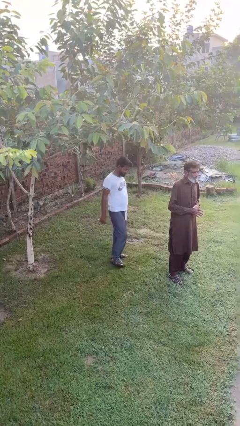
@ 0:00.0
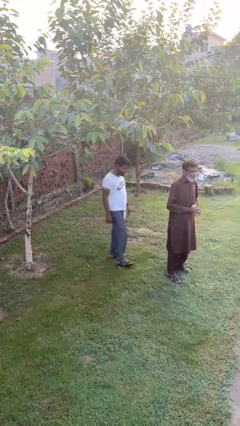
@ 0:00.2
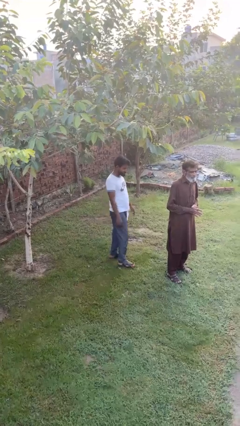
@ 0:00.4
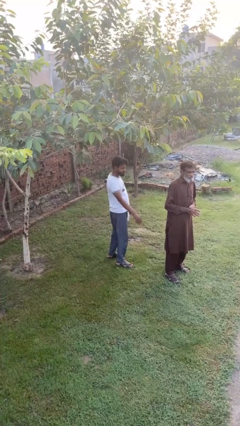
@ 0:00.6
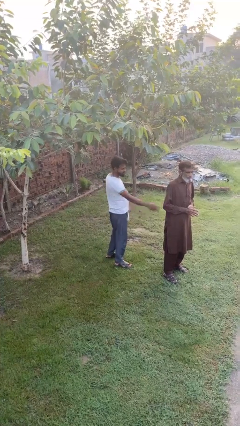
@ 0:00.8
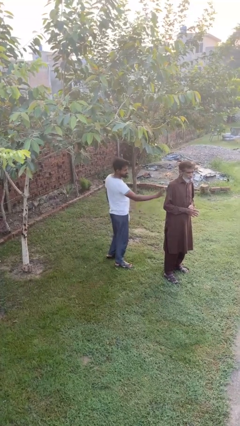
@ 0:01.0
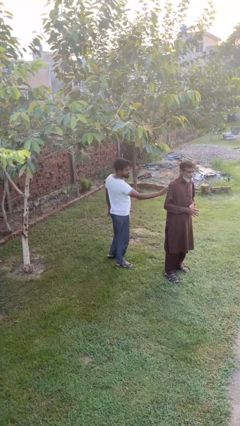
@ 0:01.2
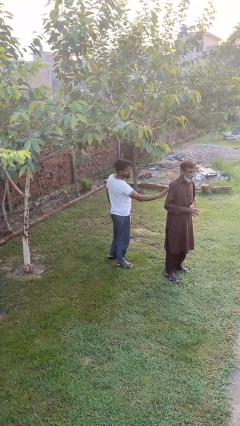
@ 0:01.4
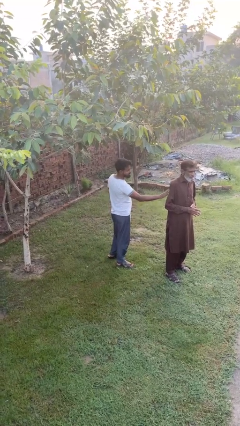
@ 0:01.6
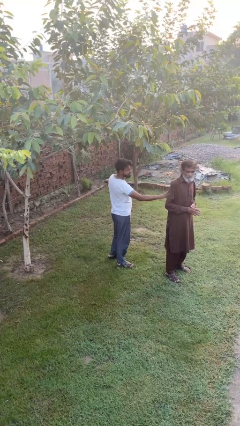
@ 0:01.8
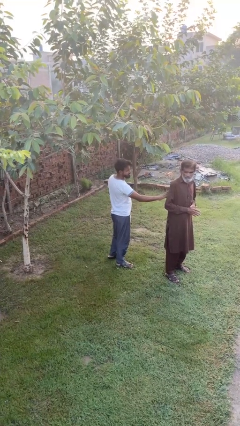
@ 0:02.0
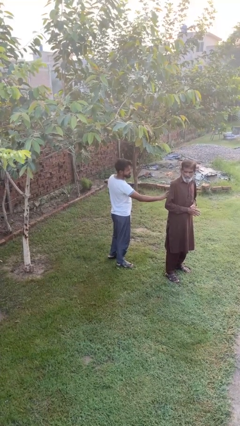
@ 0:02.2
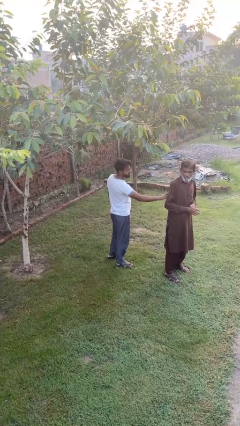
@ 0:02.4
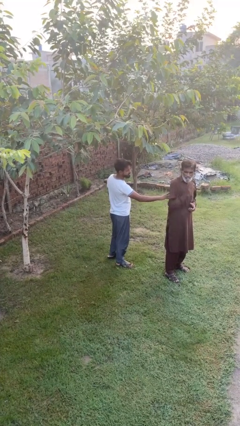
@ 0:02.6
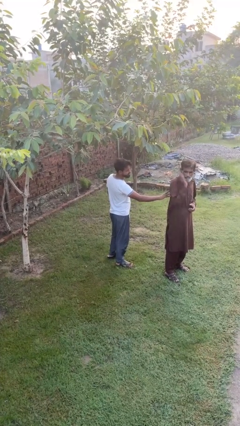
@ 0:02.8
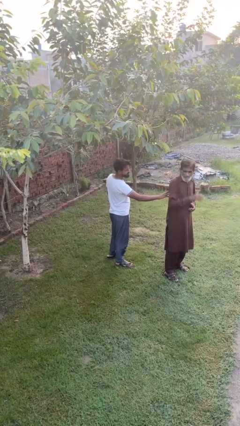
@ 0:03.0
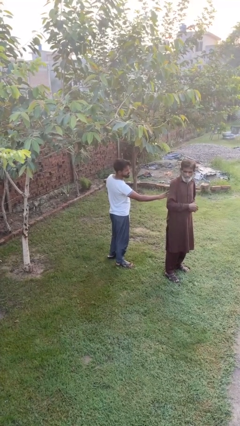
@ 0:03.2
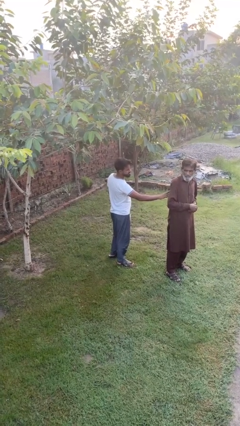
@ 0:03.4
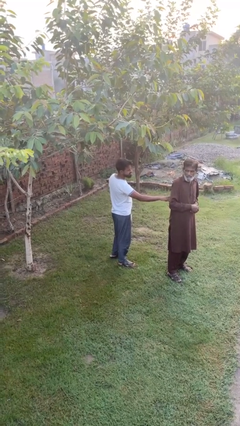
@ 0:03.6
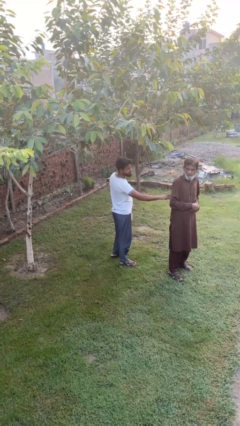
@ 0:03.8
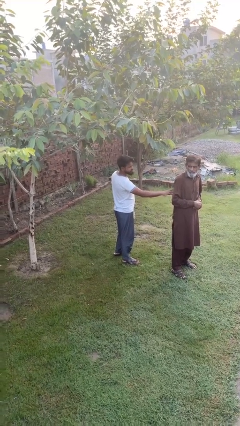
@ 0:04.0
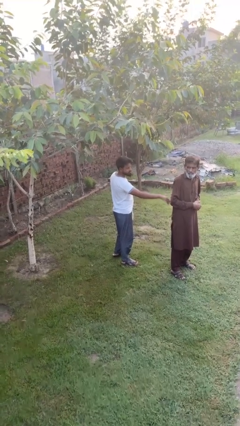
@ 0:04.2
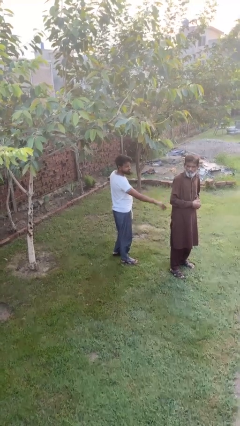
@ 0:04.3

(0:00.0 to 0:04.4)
person touches back of person

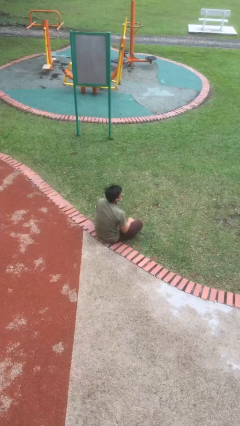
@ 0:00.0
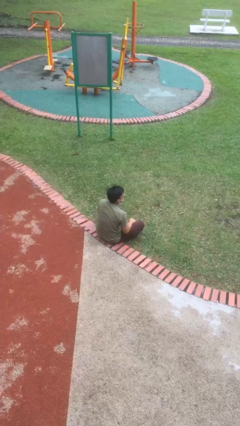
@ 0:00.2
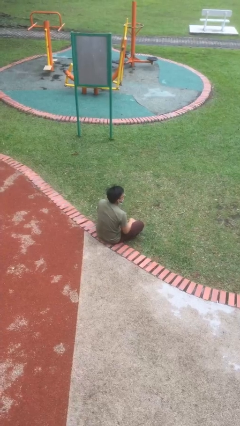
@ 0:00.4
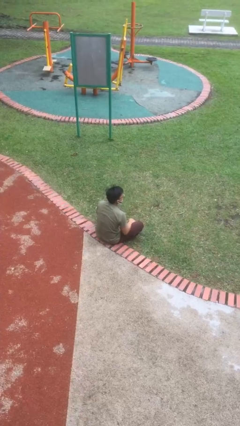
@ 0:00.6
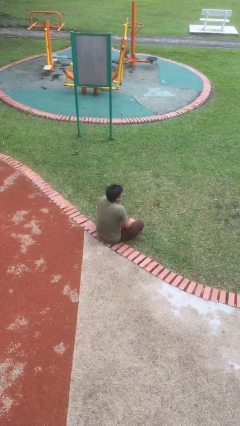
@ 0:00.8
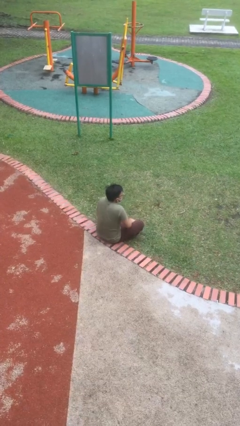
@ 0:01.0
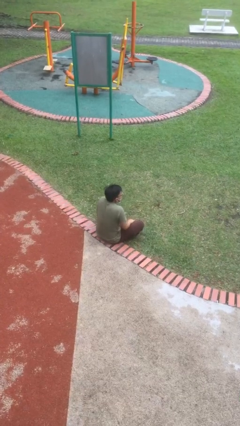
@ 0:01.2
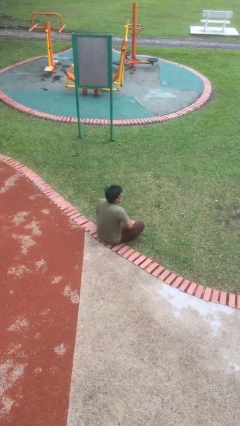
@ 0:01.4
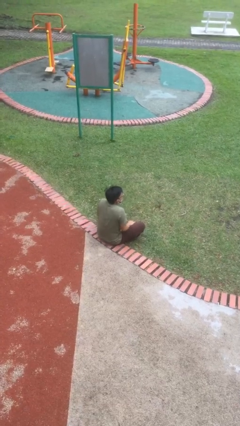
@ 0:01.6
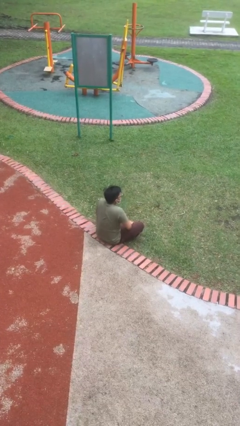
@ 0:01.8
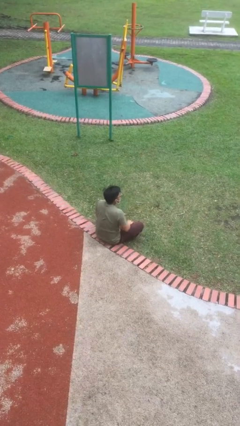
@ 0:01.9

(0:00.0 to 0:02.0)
person shrugs

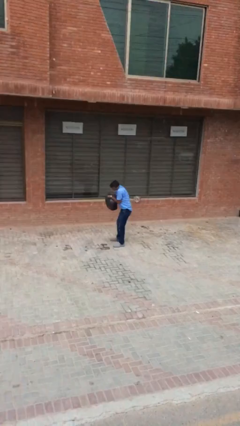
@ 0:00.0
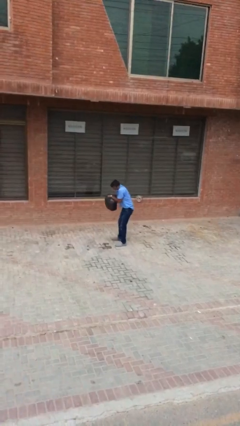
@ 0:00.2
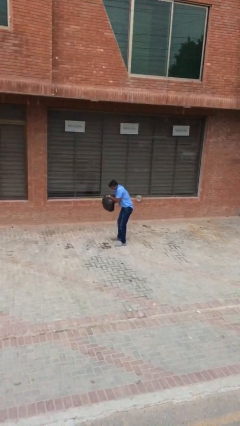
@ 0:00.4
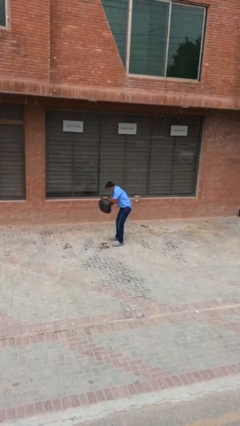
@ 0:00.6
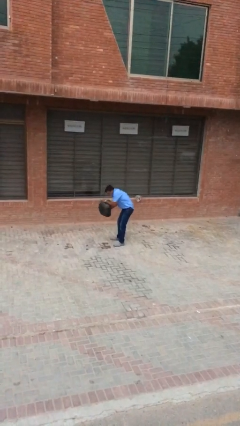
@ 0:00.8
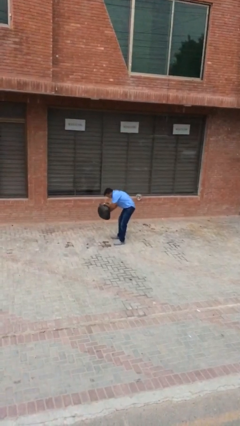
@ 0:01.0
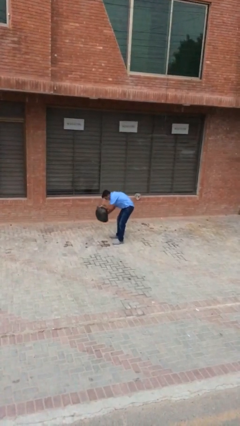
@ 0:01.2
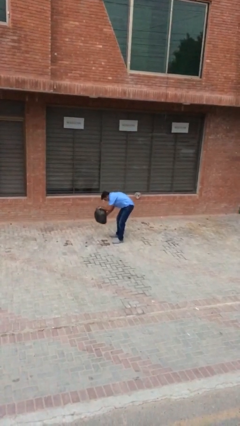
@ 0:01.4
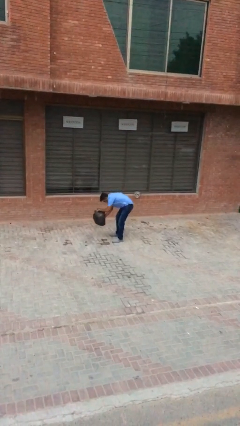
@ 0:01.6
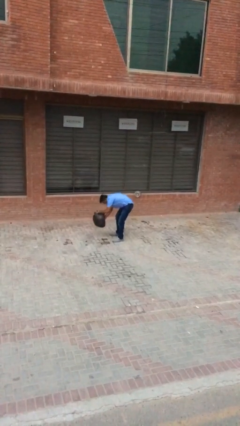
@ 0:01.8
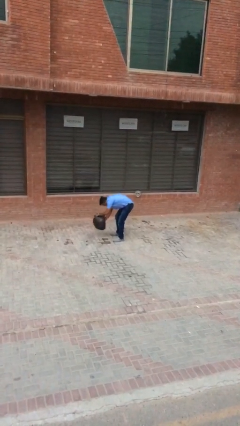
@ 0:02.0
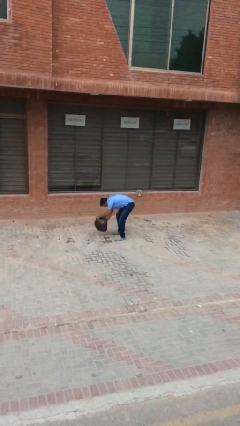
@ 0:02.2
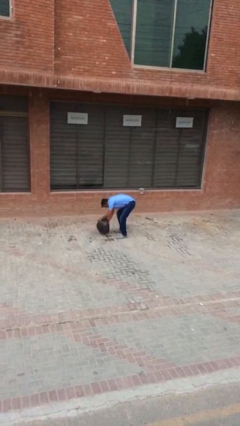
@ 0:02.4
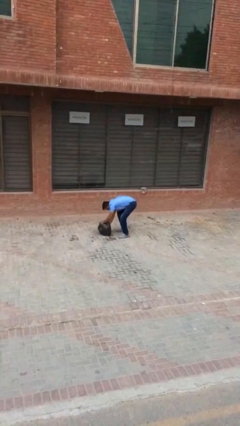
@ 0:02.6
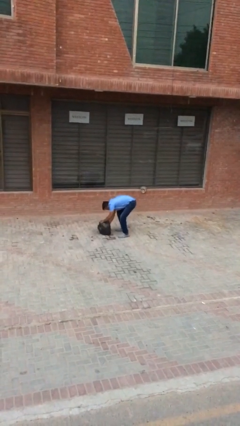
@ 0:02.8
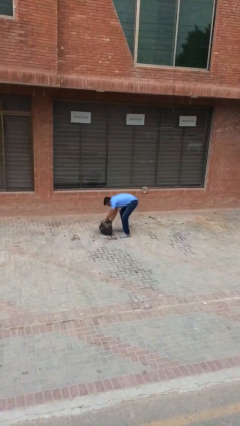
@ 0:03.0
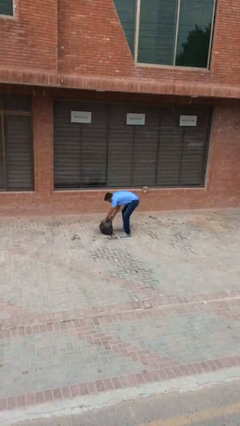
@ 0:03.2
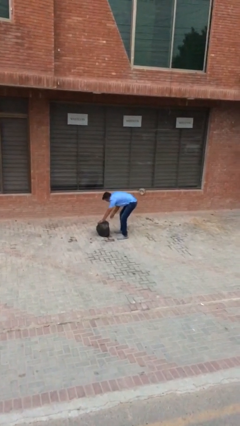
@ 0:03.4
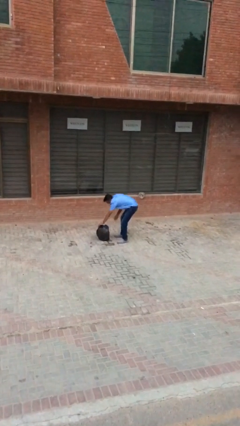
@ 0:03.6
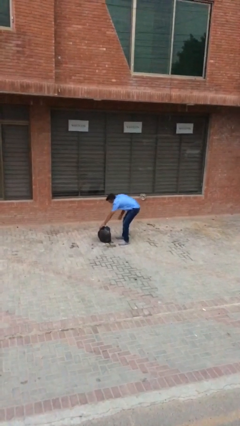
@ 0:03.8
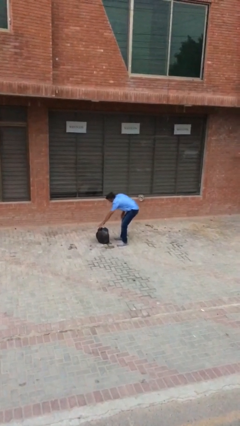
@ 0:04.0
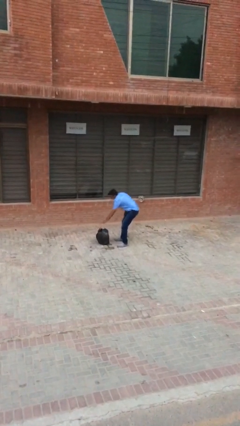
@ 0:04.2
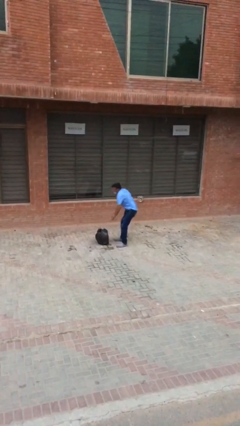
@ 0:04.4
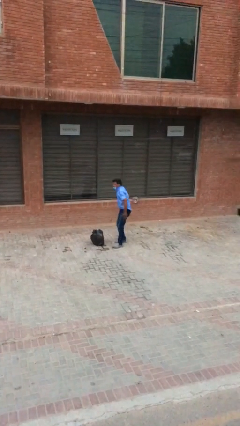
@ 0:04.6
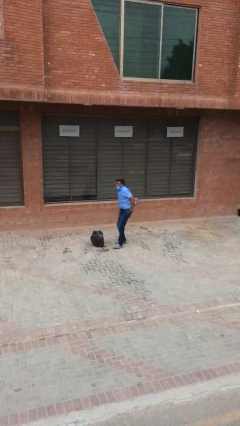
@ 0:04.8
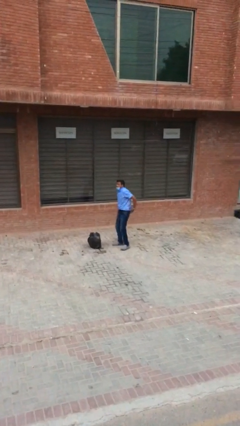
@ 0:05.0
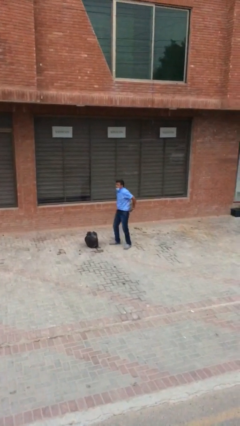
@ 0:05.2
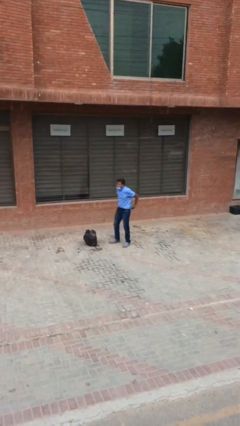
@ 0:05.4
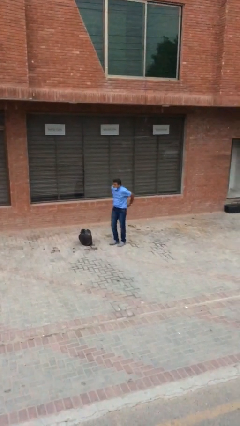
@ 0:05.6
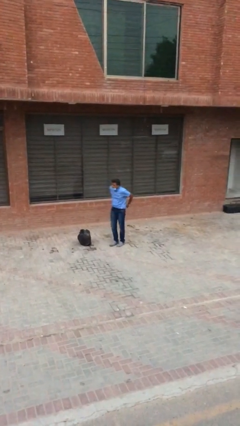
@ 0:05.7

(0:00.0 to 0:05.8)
person puts down object on floor

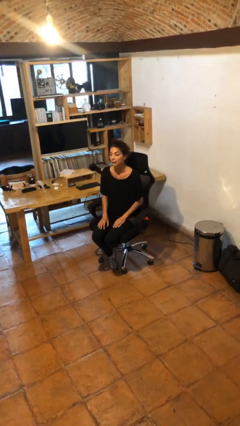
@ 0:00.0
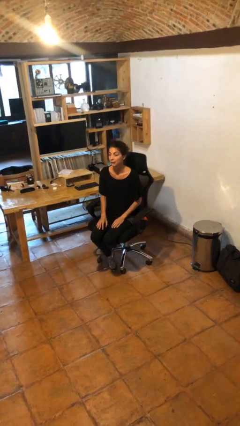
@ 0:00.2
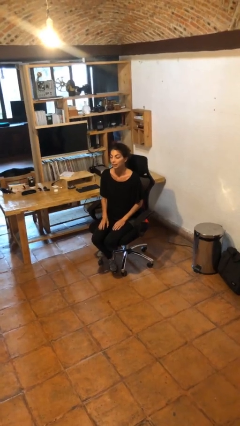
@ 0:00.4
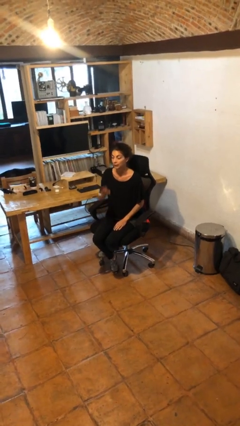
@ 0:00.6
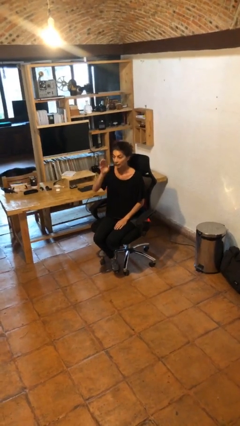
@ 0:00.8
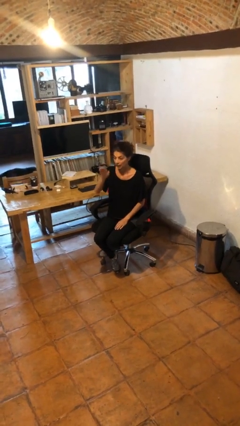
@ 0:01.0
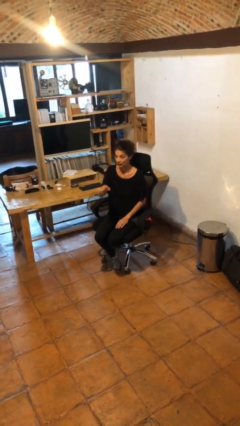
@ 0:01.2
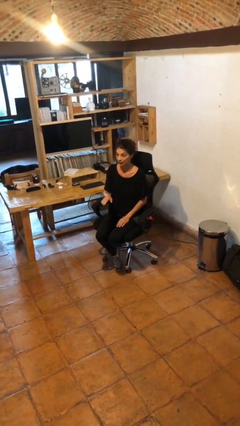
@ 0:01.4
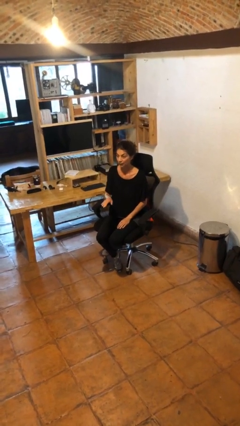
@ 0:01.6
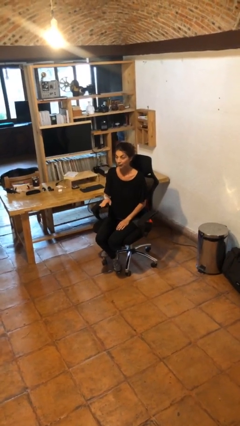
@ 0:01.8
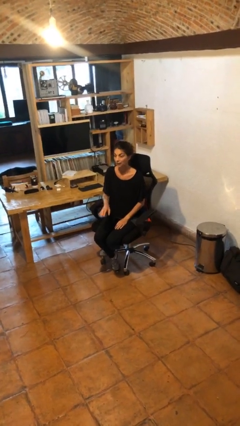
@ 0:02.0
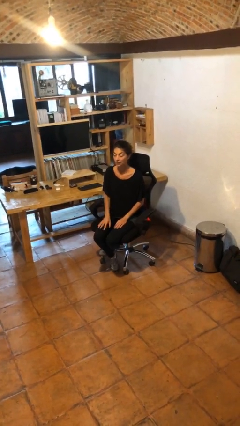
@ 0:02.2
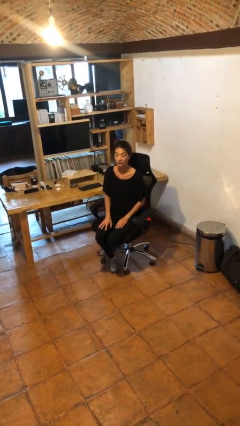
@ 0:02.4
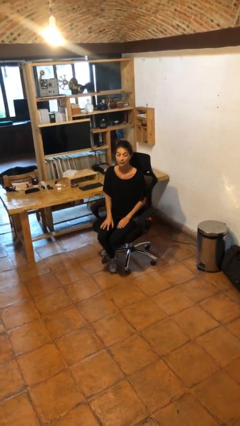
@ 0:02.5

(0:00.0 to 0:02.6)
person gestures swipe down

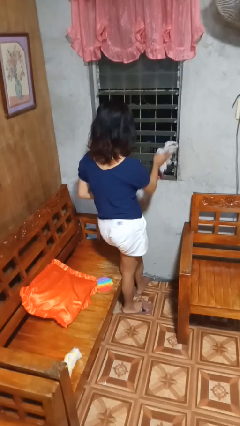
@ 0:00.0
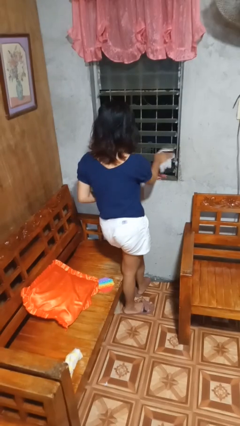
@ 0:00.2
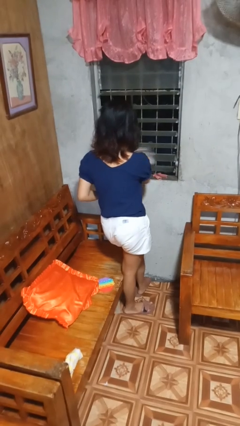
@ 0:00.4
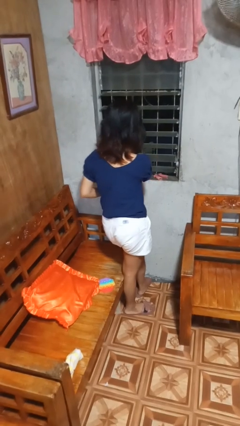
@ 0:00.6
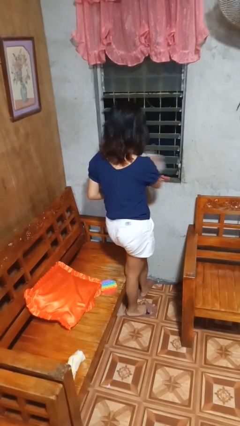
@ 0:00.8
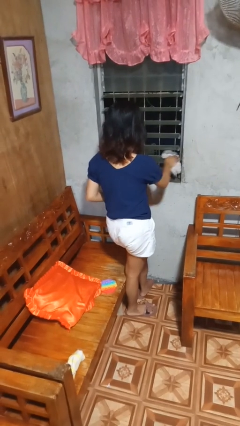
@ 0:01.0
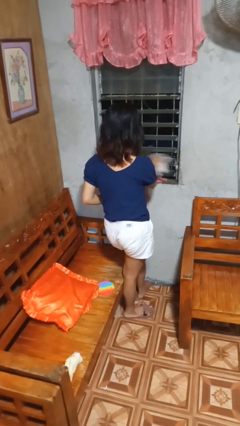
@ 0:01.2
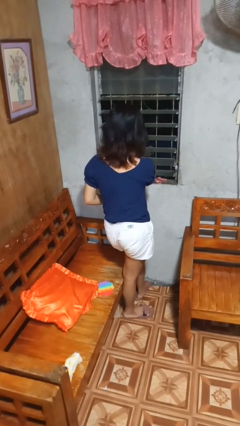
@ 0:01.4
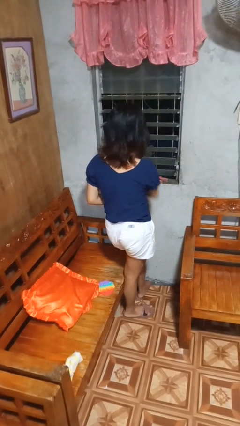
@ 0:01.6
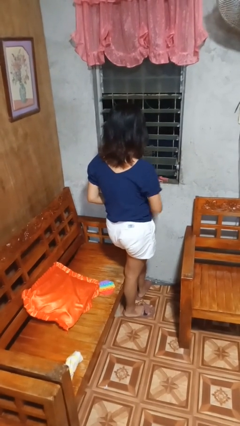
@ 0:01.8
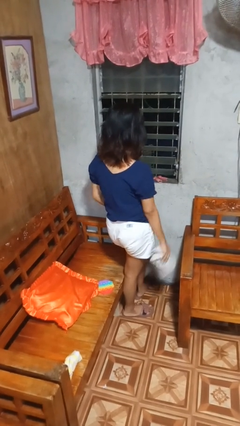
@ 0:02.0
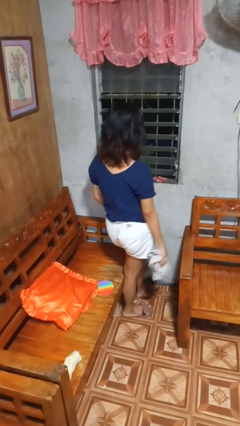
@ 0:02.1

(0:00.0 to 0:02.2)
person washes window

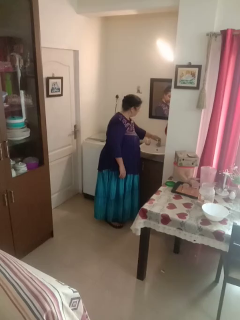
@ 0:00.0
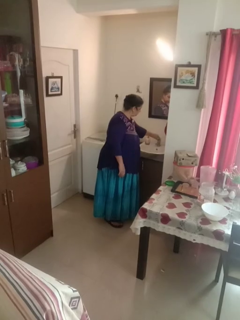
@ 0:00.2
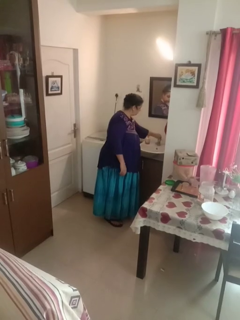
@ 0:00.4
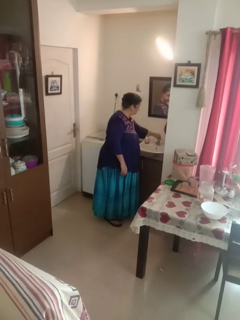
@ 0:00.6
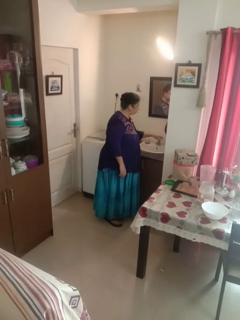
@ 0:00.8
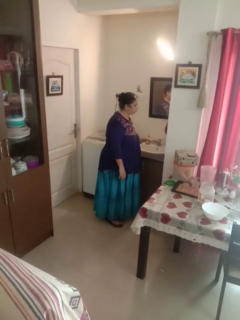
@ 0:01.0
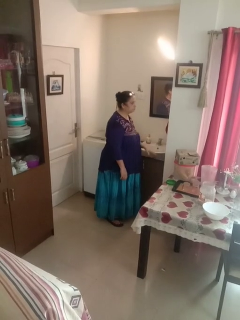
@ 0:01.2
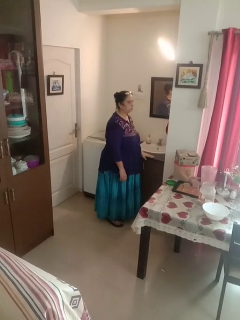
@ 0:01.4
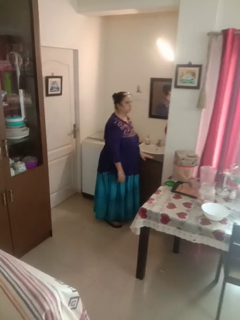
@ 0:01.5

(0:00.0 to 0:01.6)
person turns on faucet
